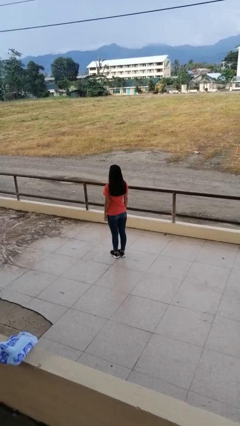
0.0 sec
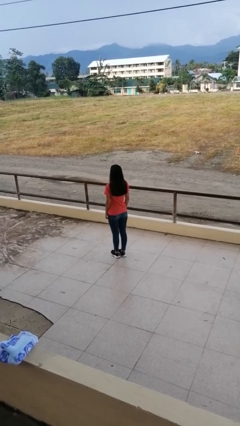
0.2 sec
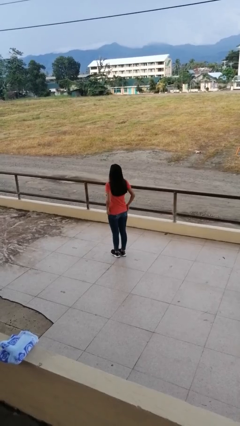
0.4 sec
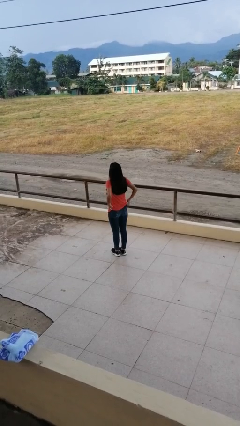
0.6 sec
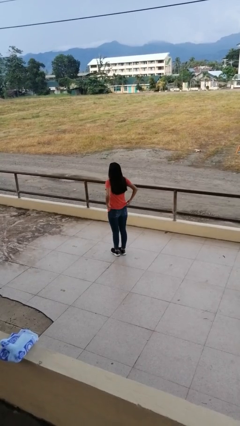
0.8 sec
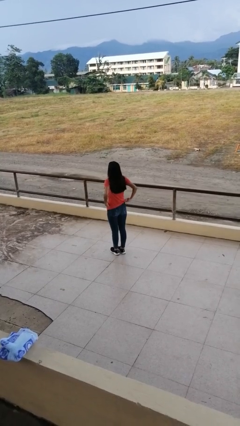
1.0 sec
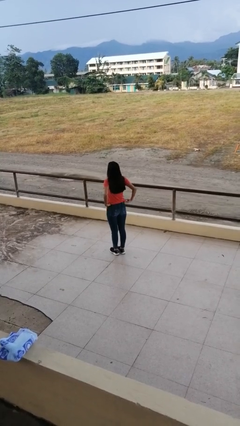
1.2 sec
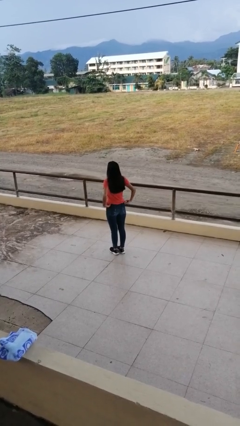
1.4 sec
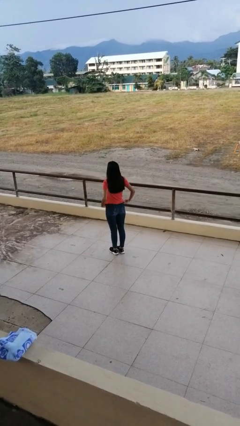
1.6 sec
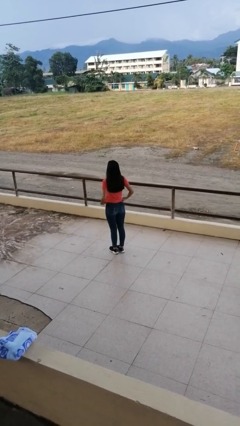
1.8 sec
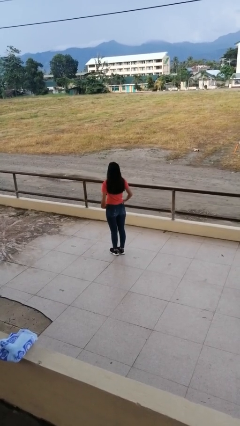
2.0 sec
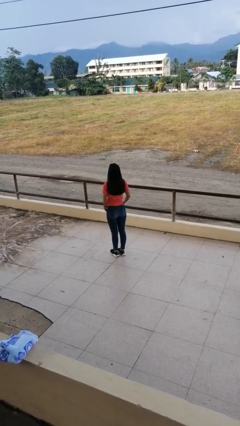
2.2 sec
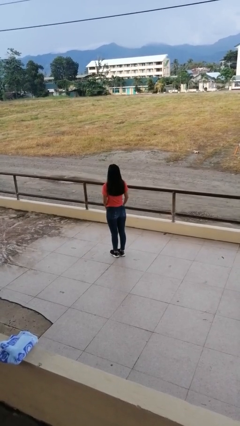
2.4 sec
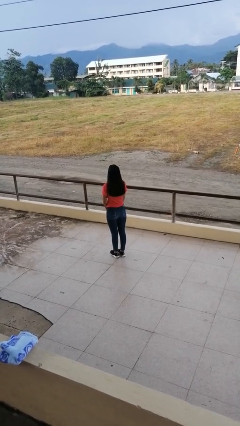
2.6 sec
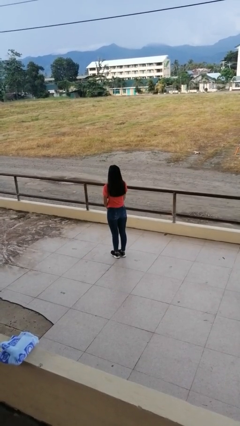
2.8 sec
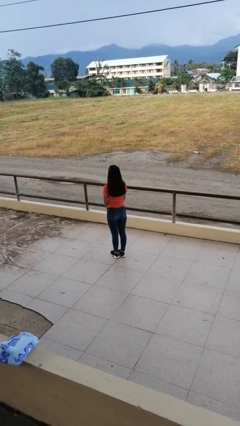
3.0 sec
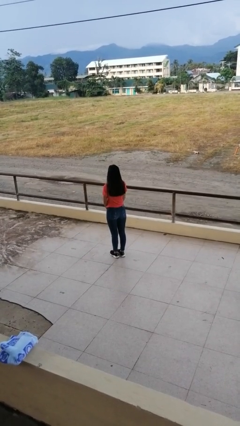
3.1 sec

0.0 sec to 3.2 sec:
person tucks in shirt

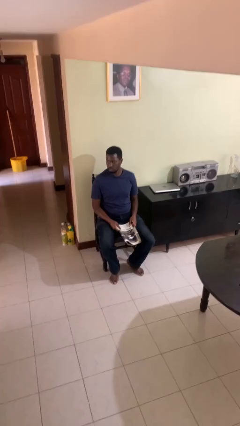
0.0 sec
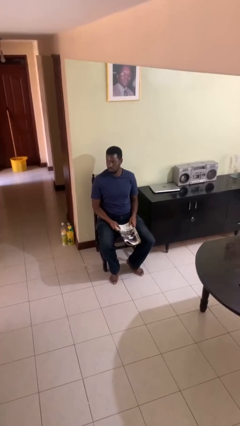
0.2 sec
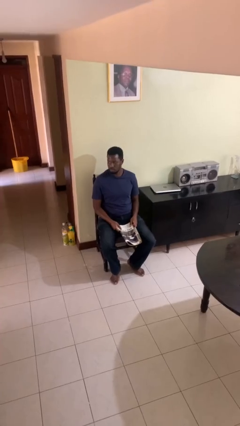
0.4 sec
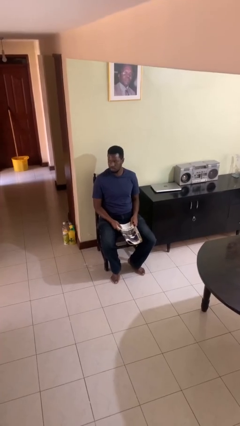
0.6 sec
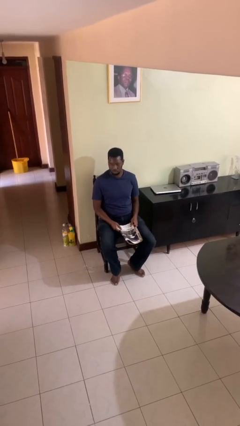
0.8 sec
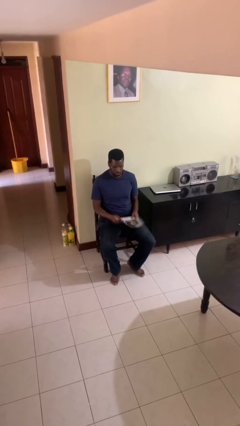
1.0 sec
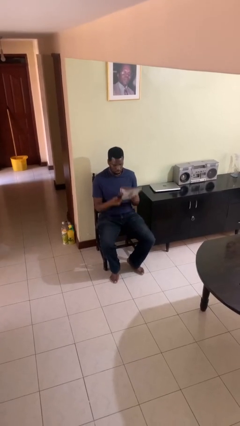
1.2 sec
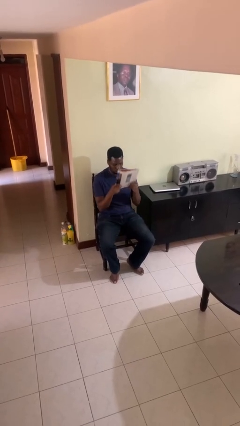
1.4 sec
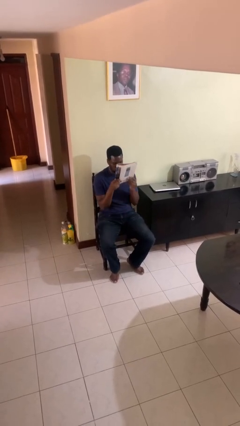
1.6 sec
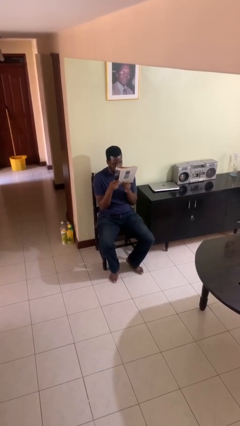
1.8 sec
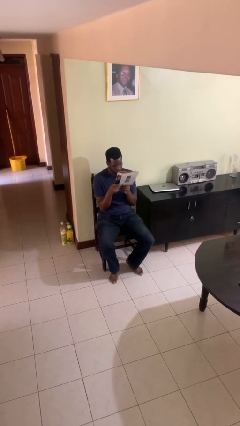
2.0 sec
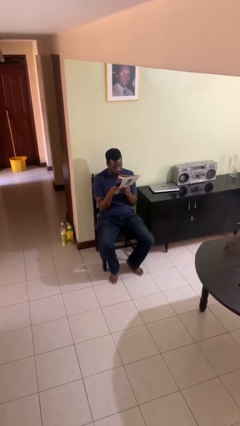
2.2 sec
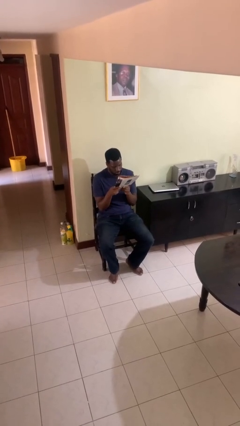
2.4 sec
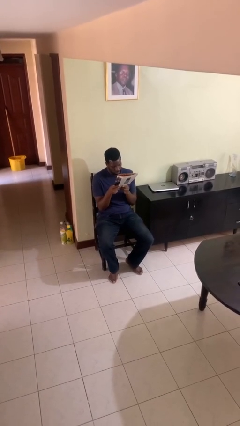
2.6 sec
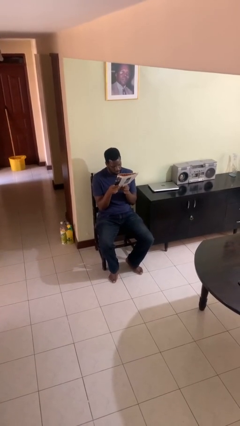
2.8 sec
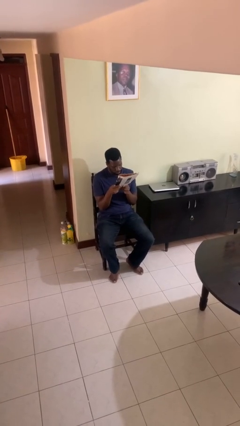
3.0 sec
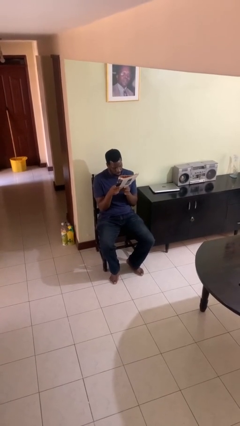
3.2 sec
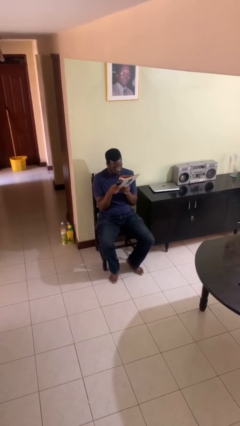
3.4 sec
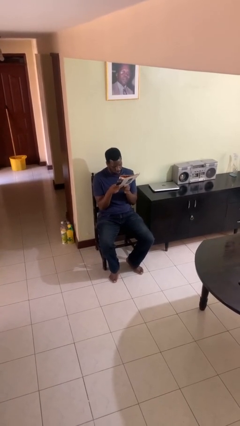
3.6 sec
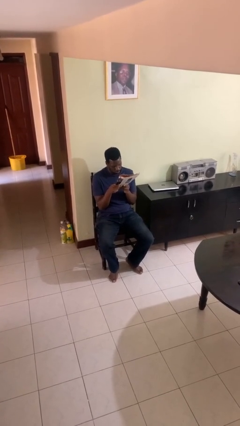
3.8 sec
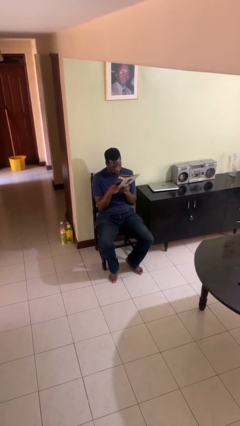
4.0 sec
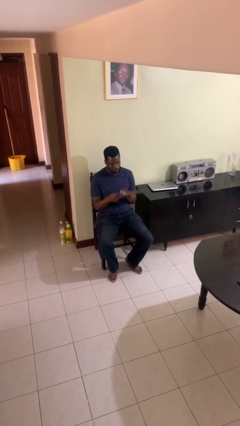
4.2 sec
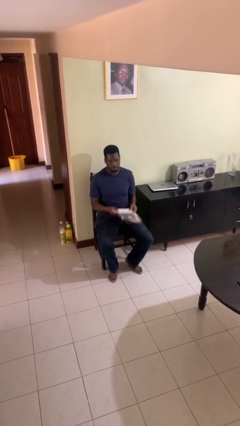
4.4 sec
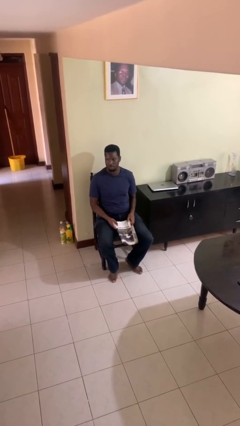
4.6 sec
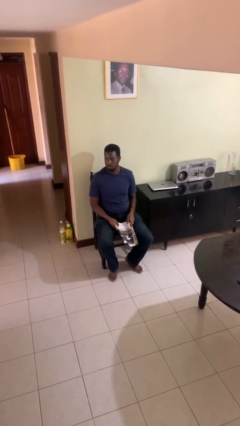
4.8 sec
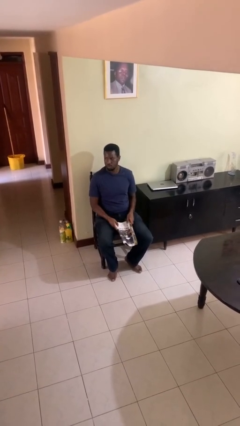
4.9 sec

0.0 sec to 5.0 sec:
person reads document

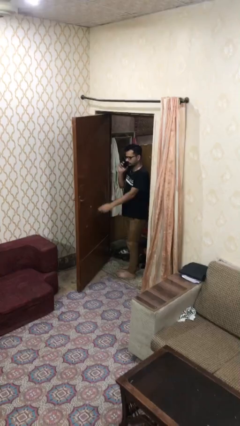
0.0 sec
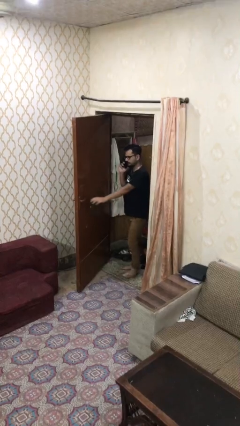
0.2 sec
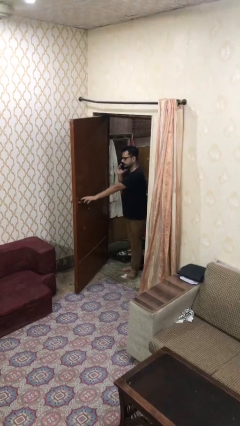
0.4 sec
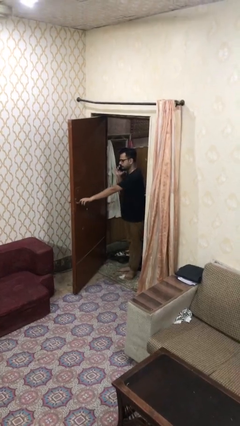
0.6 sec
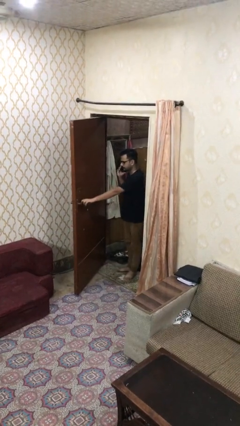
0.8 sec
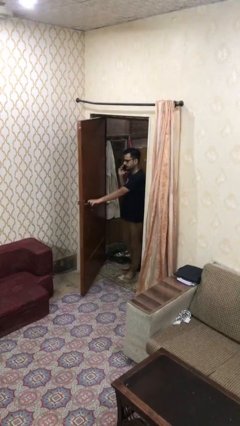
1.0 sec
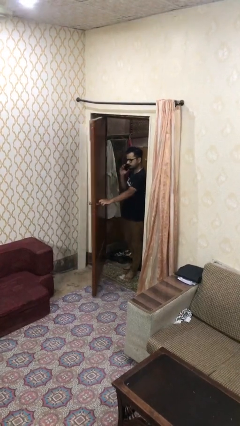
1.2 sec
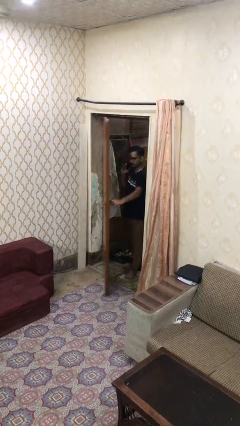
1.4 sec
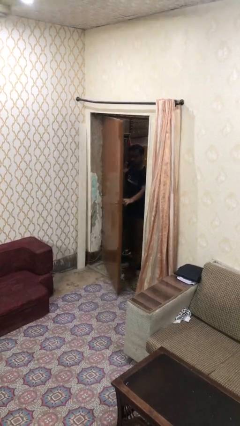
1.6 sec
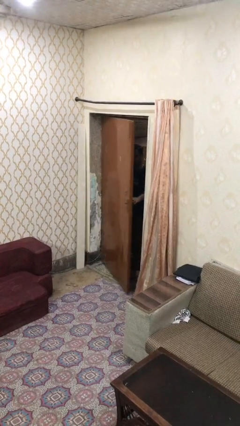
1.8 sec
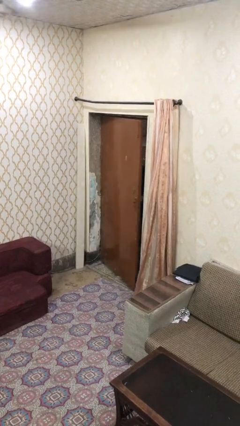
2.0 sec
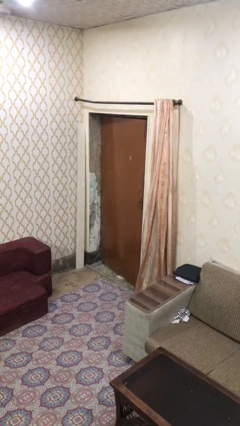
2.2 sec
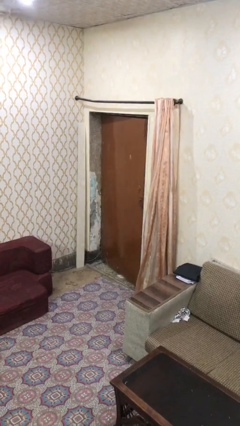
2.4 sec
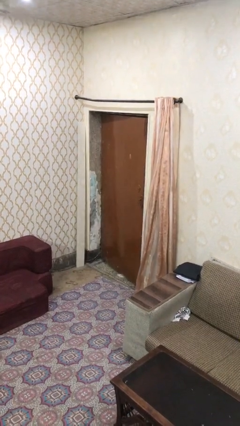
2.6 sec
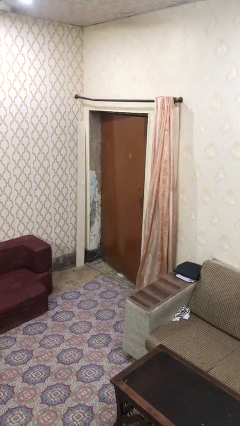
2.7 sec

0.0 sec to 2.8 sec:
person closes facility door

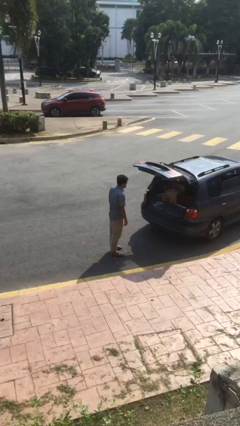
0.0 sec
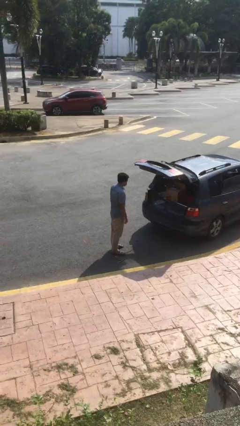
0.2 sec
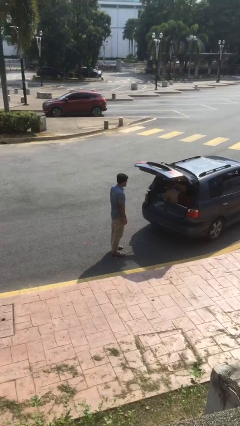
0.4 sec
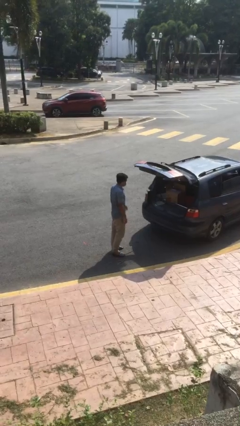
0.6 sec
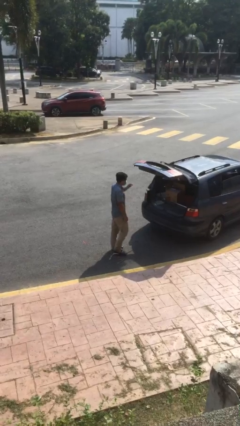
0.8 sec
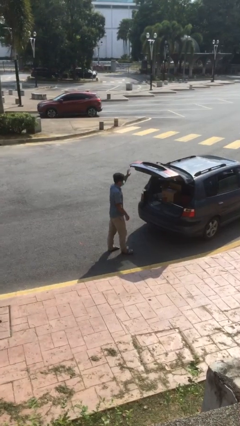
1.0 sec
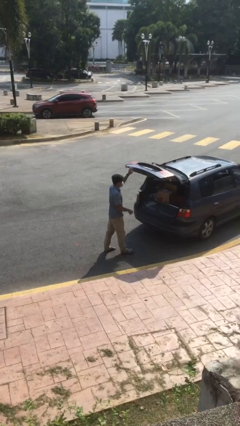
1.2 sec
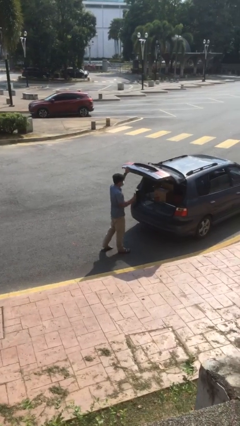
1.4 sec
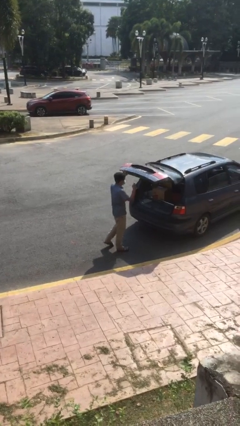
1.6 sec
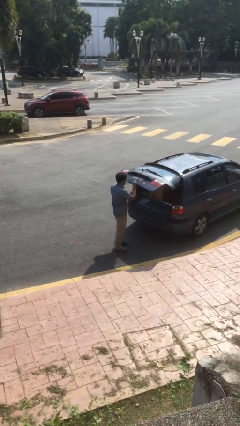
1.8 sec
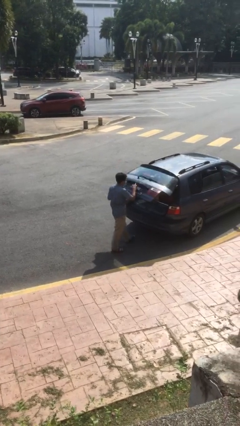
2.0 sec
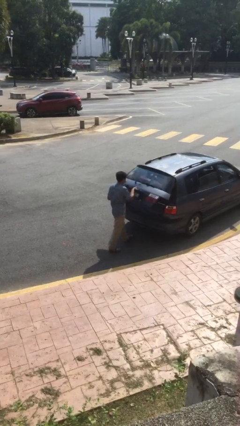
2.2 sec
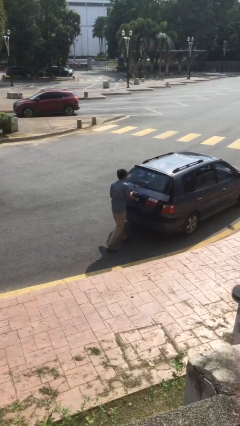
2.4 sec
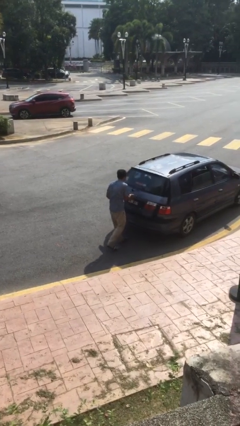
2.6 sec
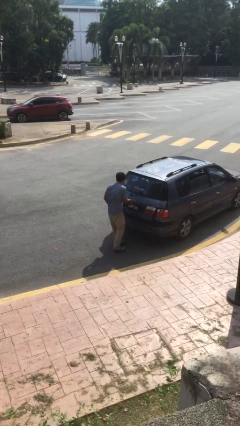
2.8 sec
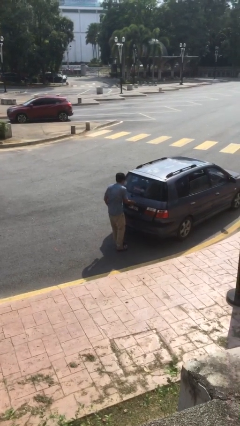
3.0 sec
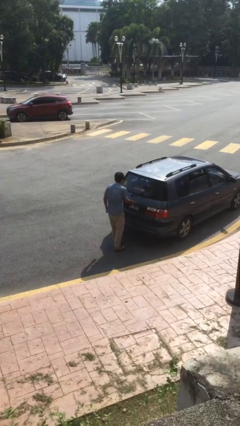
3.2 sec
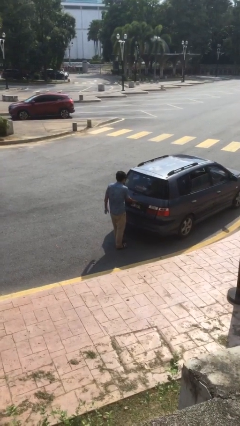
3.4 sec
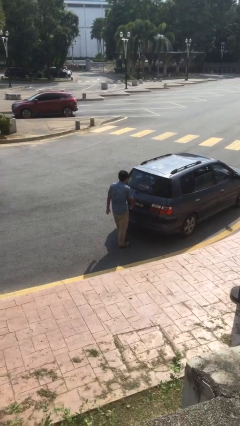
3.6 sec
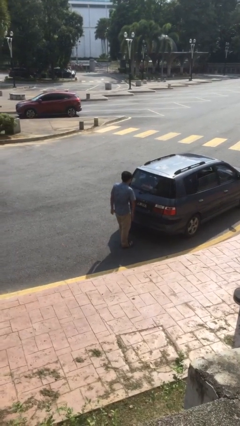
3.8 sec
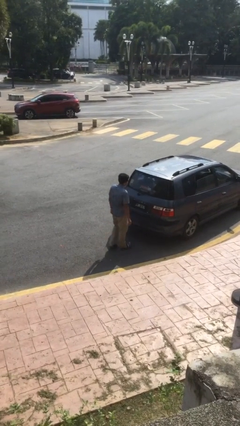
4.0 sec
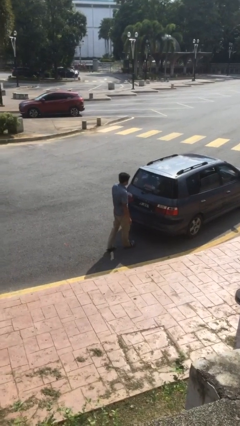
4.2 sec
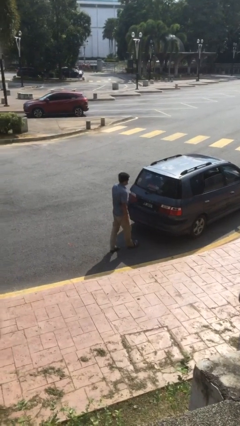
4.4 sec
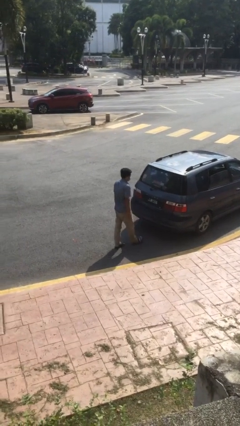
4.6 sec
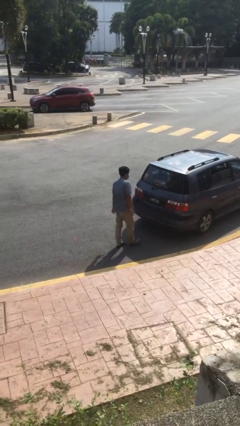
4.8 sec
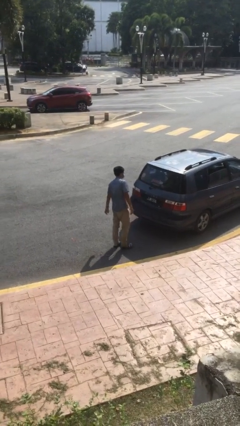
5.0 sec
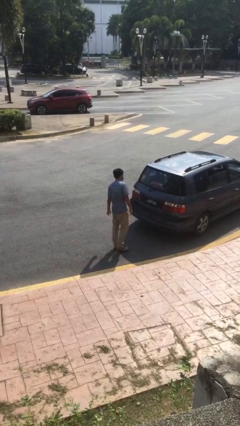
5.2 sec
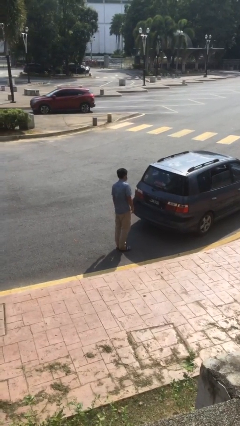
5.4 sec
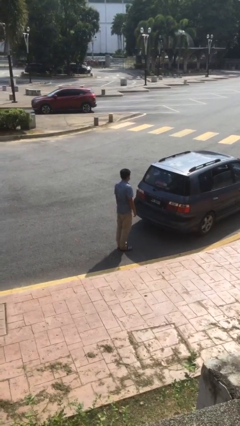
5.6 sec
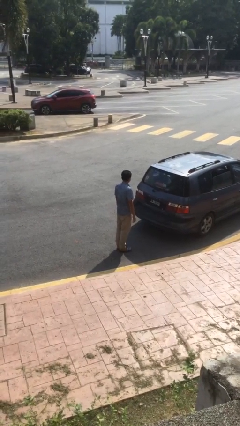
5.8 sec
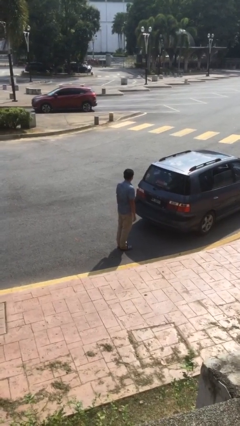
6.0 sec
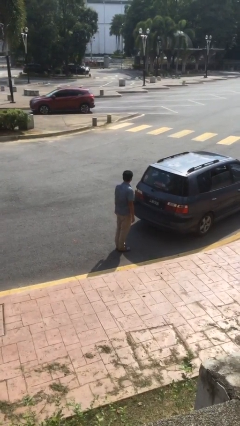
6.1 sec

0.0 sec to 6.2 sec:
person closes car trunk

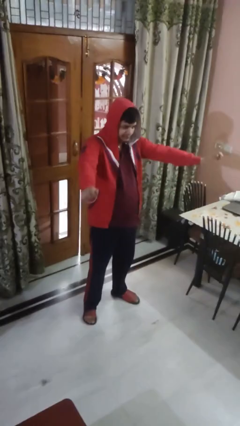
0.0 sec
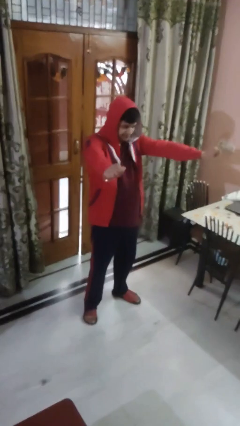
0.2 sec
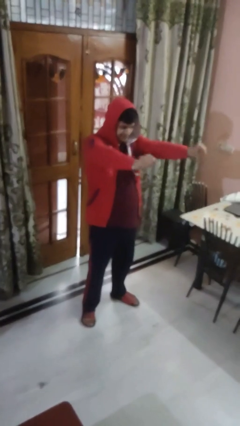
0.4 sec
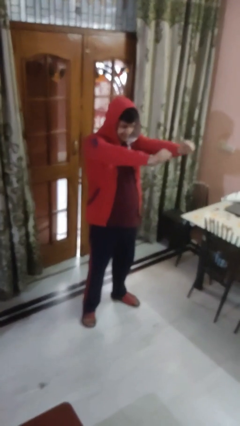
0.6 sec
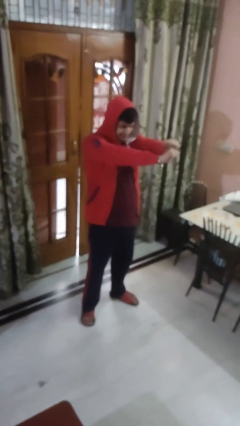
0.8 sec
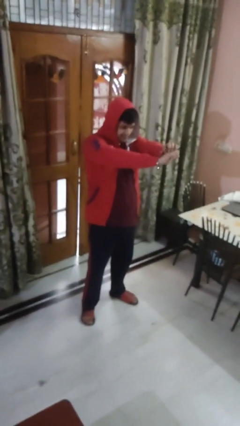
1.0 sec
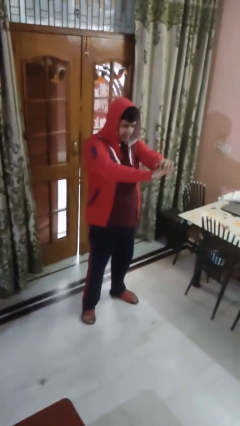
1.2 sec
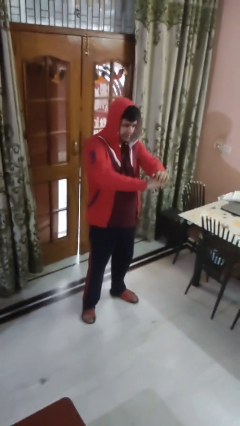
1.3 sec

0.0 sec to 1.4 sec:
person gestures zoom out
